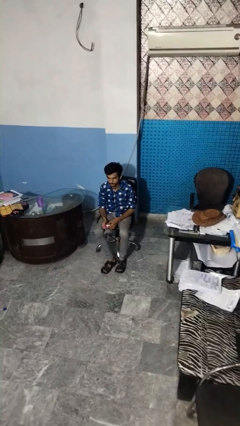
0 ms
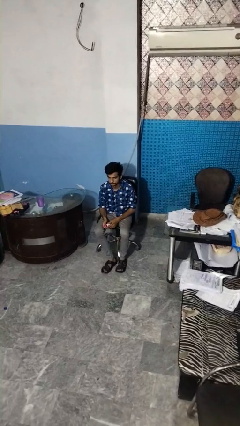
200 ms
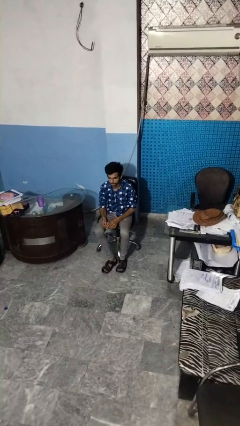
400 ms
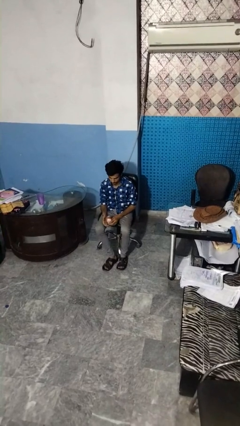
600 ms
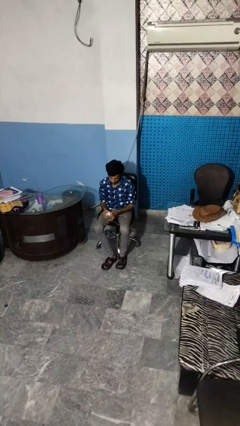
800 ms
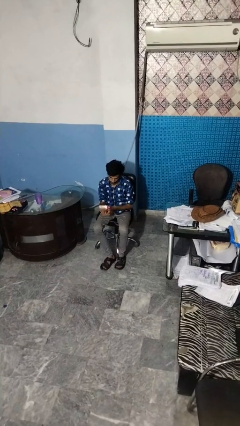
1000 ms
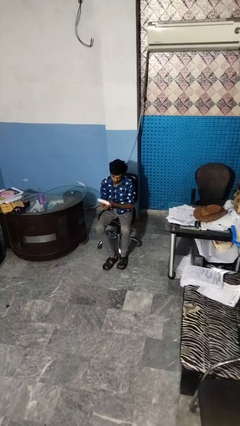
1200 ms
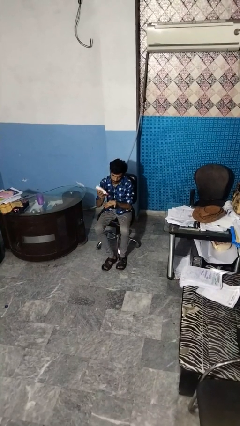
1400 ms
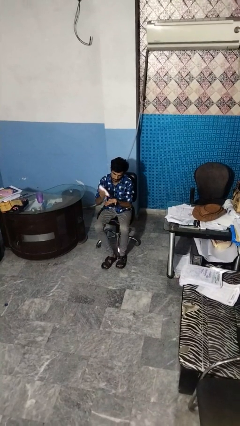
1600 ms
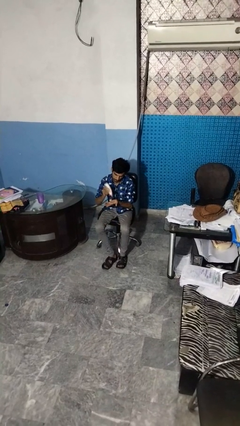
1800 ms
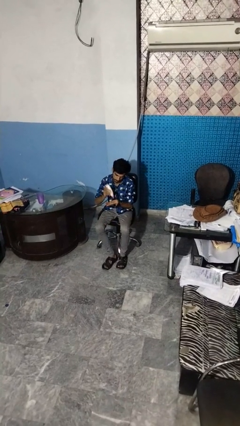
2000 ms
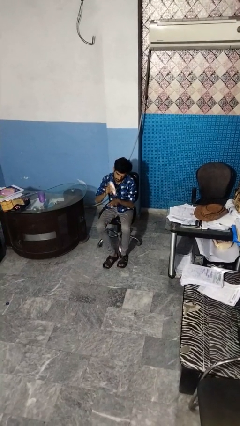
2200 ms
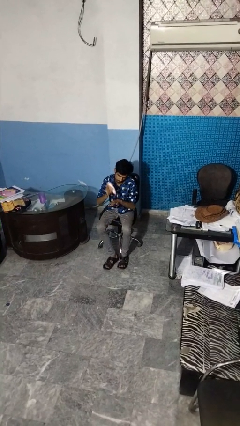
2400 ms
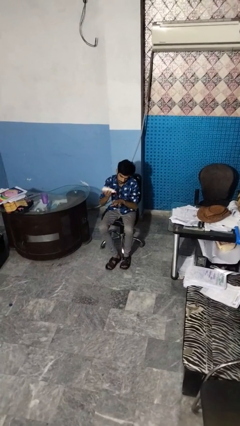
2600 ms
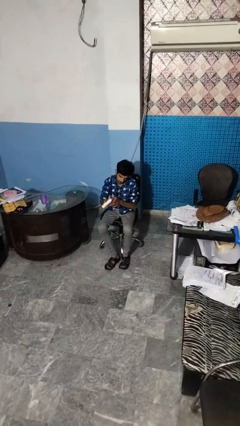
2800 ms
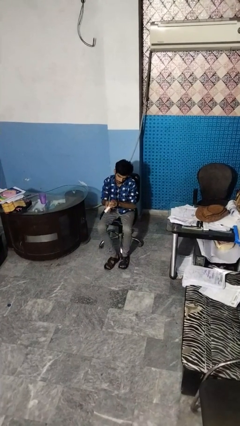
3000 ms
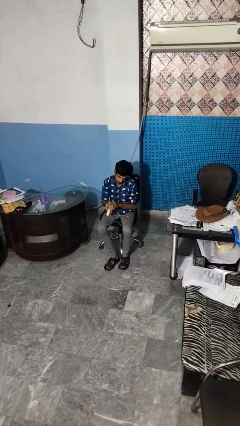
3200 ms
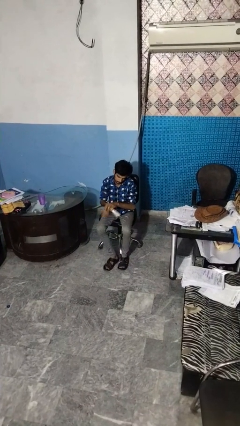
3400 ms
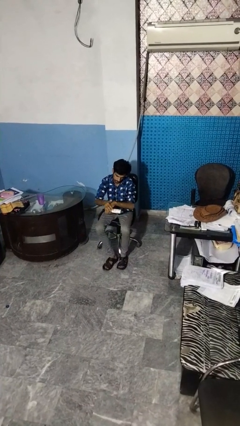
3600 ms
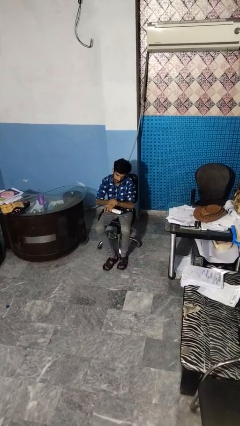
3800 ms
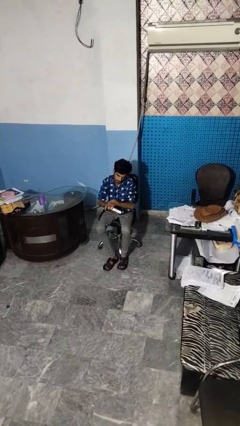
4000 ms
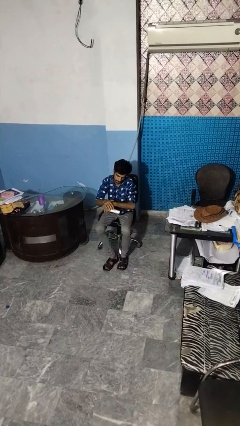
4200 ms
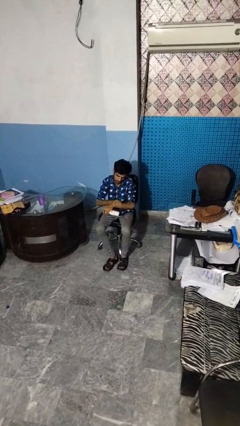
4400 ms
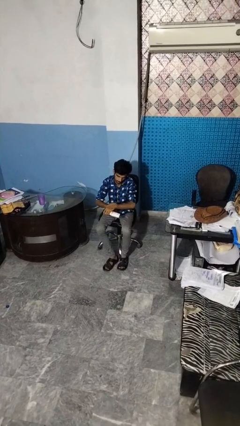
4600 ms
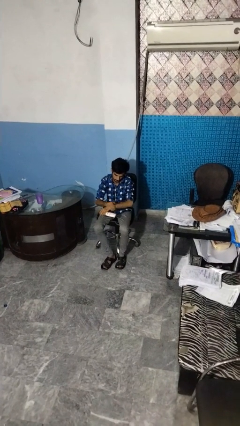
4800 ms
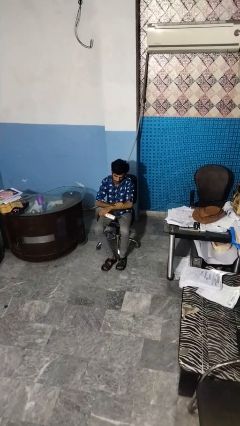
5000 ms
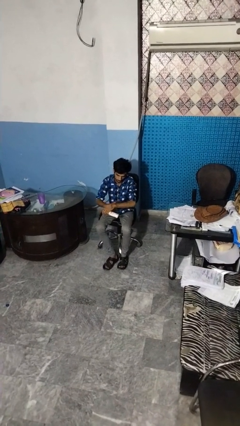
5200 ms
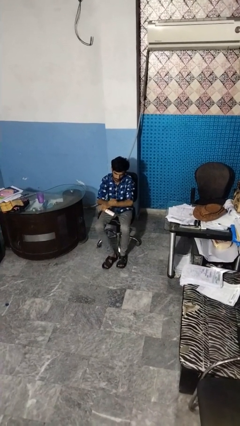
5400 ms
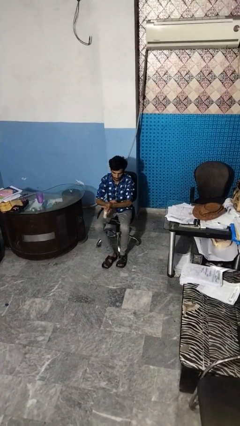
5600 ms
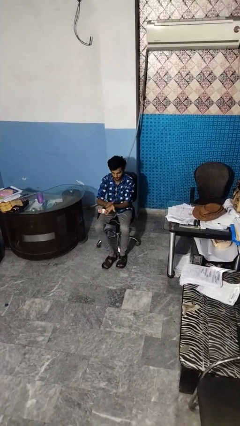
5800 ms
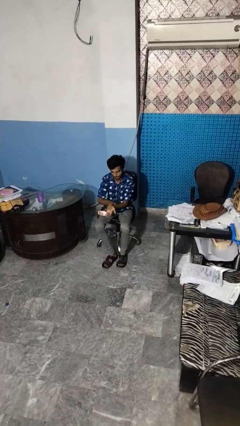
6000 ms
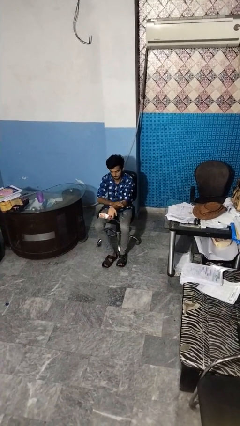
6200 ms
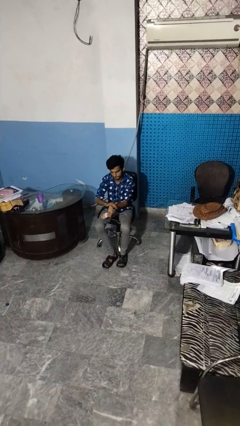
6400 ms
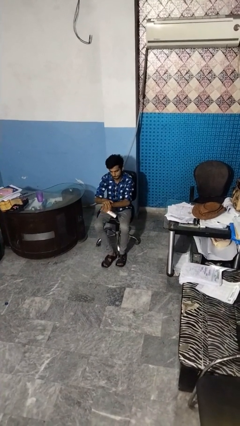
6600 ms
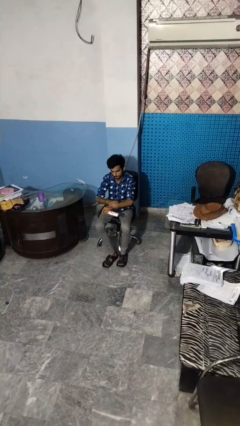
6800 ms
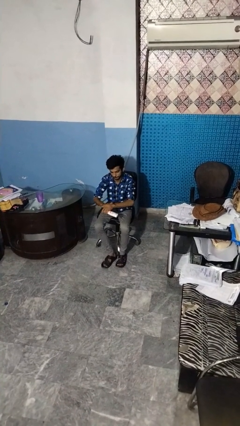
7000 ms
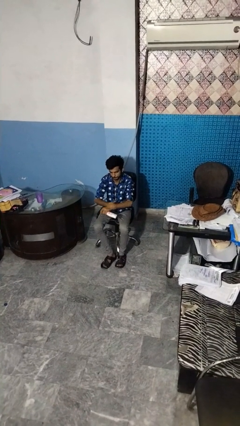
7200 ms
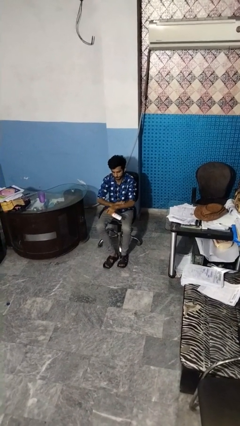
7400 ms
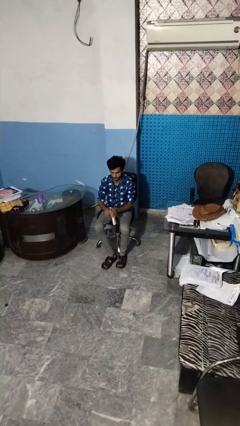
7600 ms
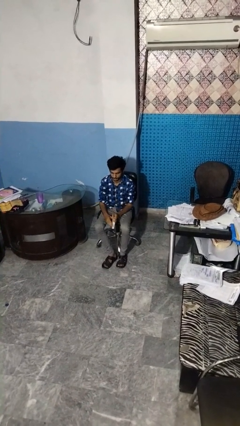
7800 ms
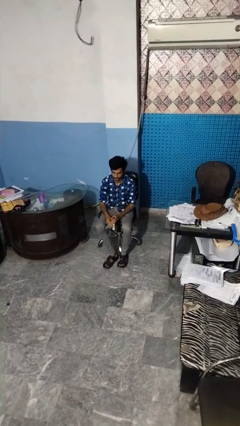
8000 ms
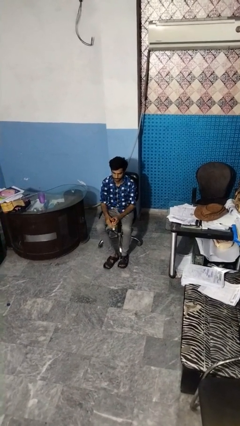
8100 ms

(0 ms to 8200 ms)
person applies sunscreen

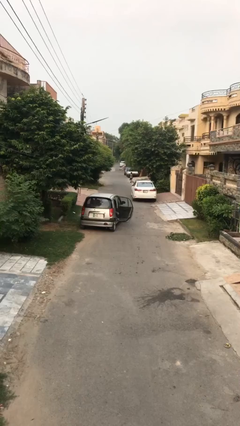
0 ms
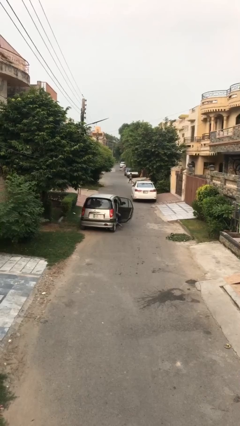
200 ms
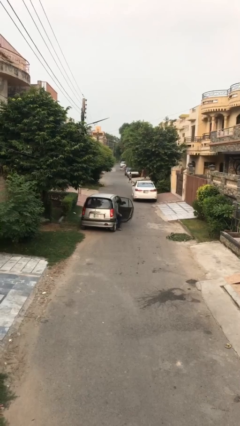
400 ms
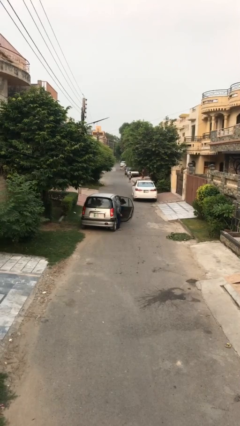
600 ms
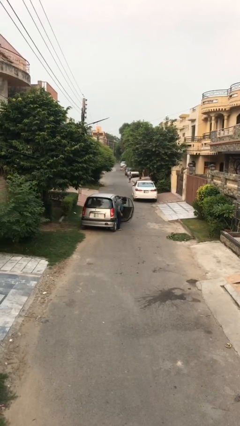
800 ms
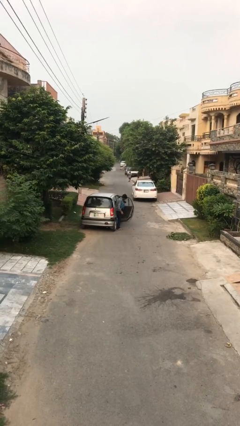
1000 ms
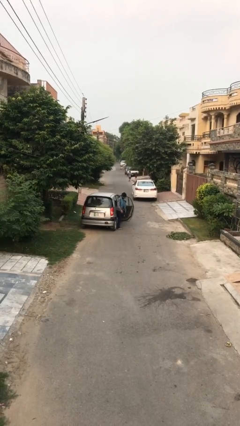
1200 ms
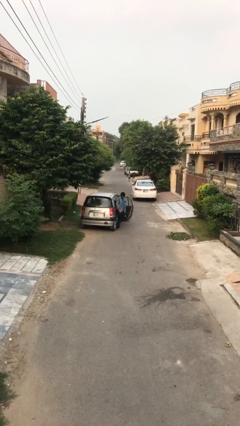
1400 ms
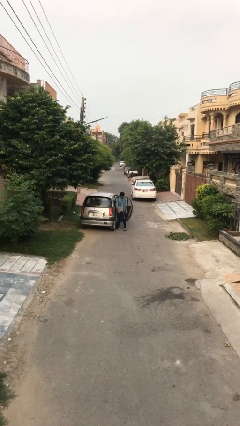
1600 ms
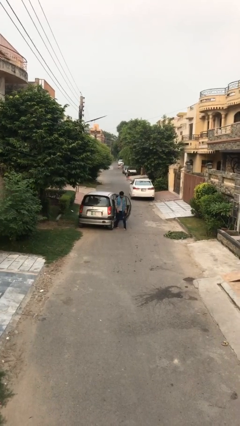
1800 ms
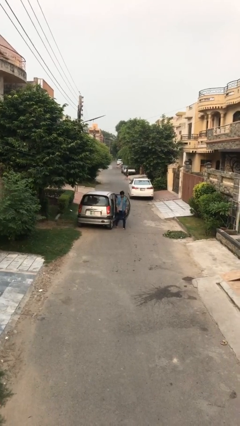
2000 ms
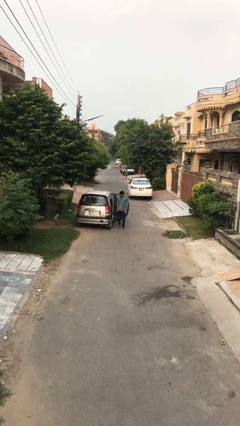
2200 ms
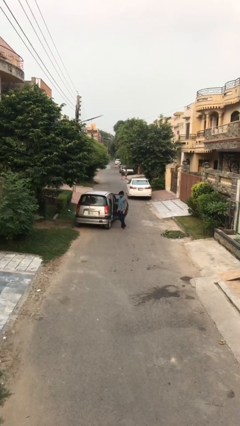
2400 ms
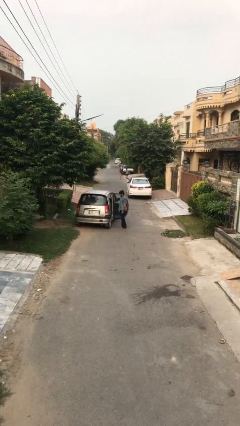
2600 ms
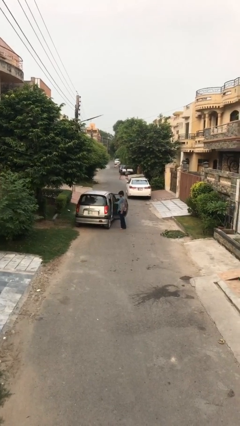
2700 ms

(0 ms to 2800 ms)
person exits car

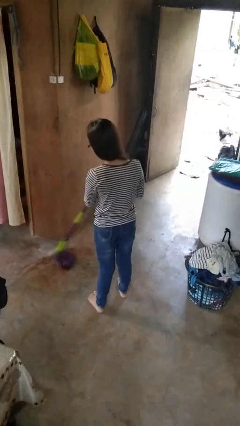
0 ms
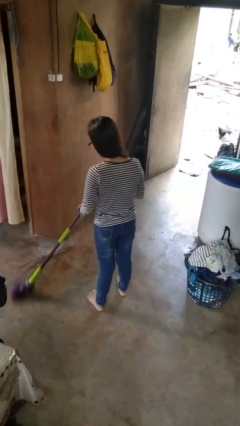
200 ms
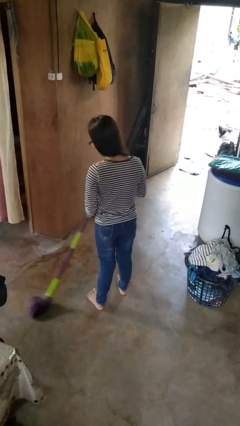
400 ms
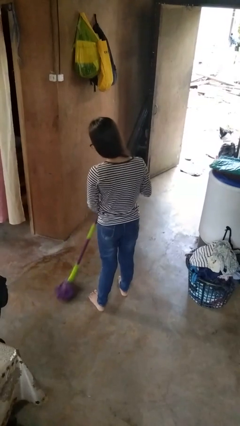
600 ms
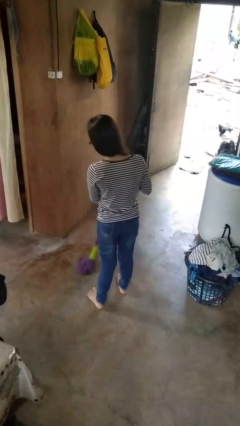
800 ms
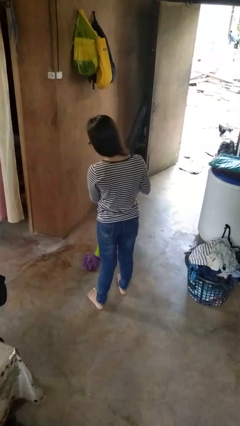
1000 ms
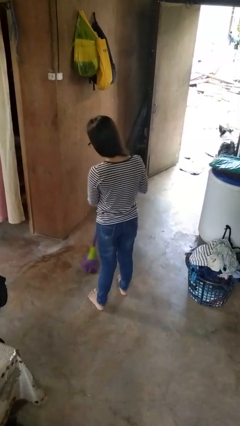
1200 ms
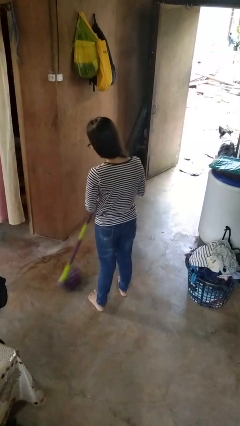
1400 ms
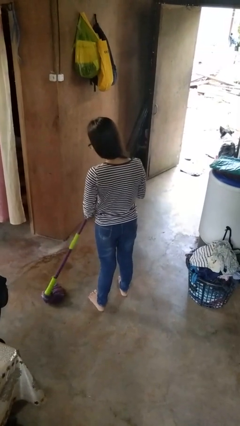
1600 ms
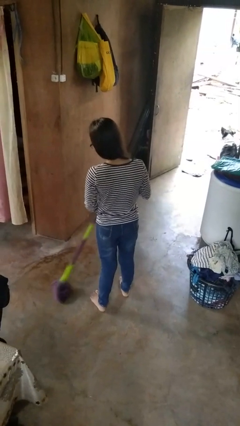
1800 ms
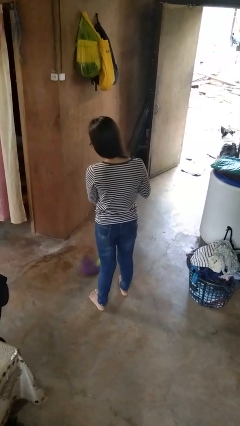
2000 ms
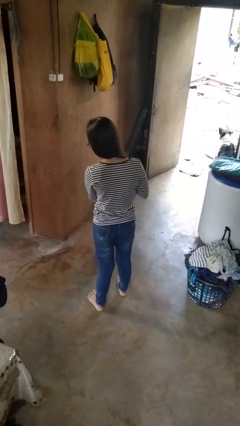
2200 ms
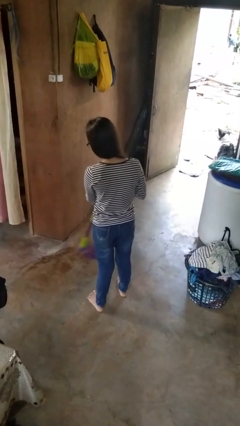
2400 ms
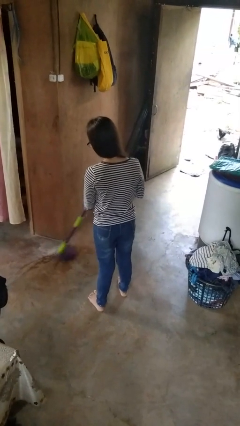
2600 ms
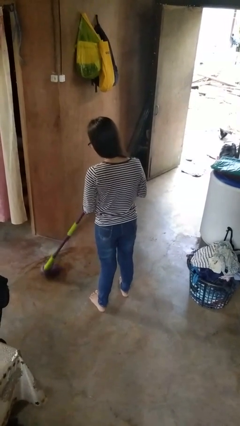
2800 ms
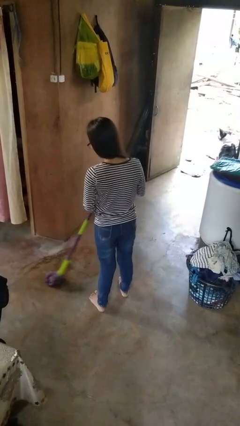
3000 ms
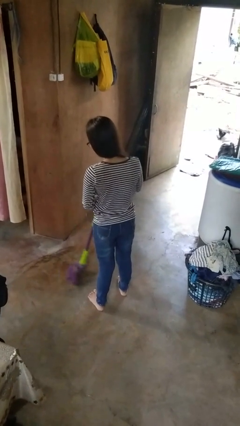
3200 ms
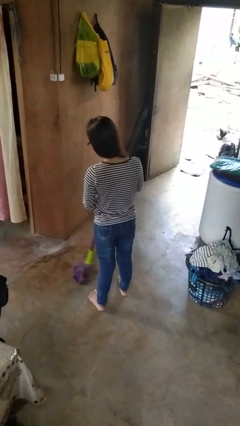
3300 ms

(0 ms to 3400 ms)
person mops

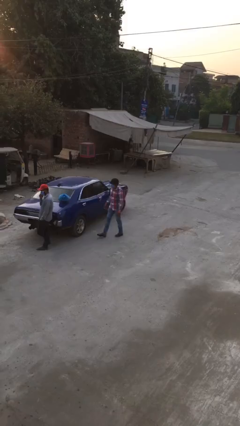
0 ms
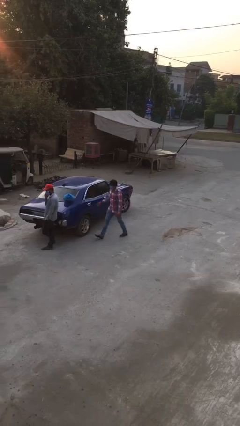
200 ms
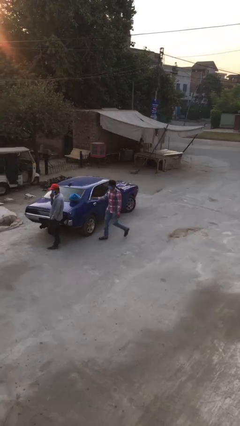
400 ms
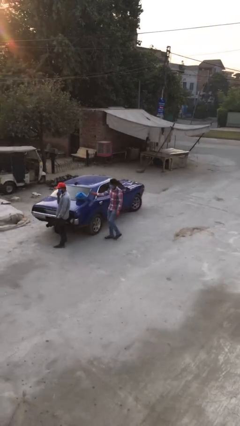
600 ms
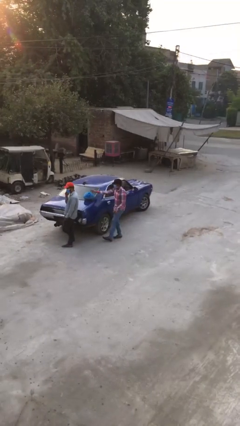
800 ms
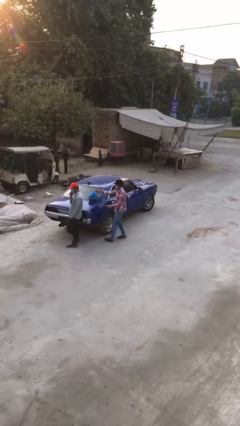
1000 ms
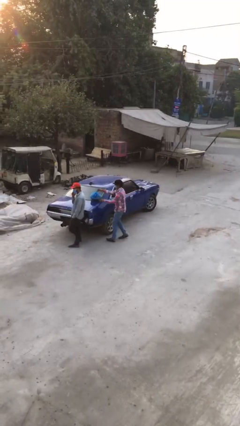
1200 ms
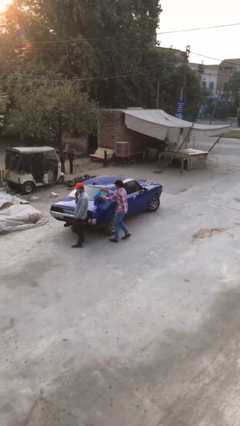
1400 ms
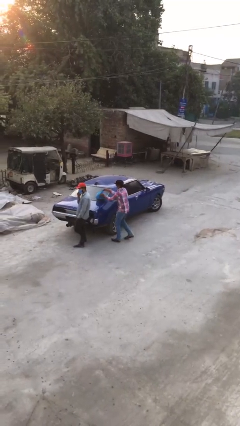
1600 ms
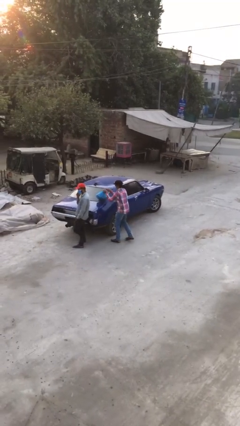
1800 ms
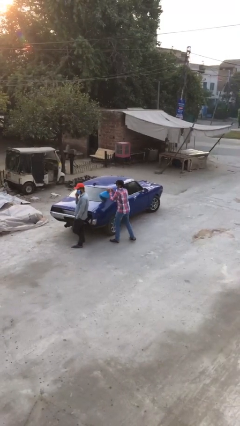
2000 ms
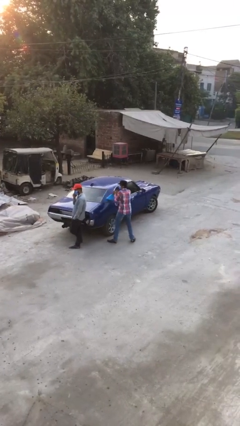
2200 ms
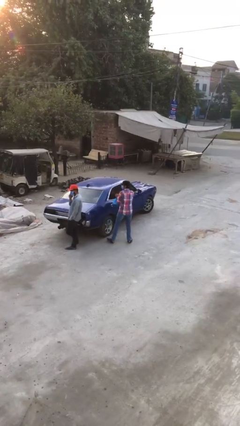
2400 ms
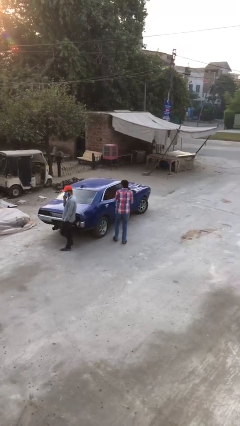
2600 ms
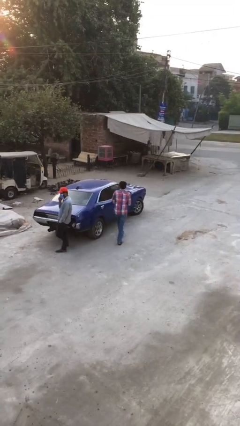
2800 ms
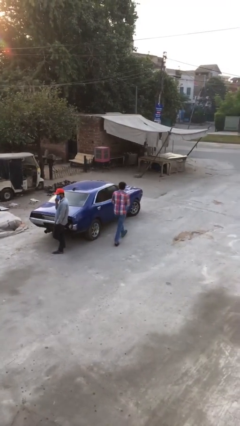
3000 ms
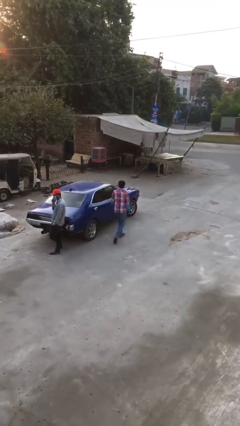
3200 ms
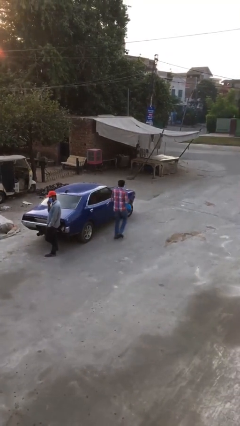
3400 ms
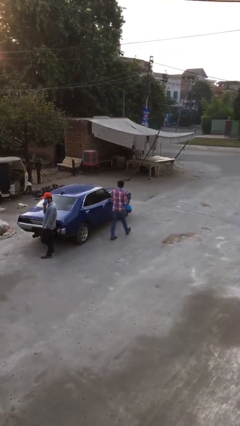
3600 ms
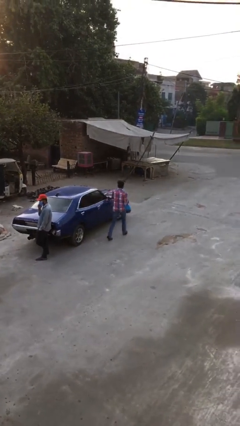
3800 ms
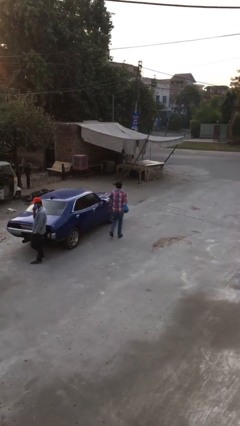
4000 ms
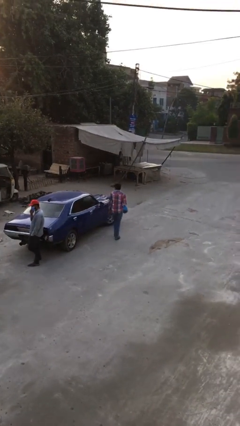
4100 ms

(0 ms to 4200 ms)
person steals object from person
